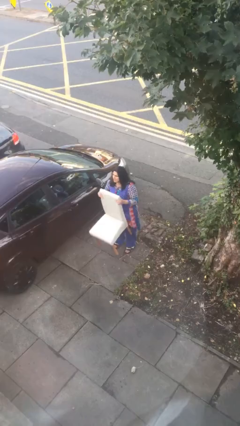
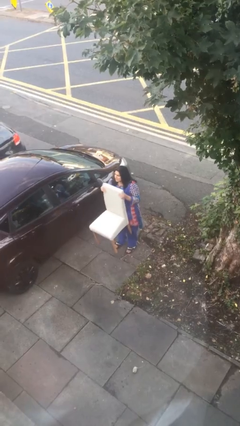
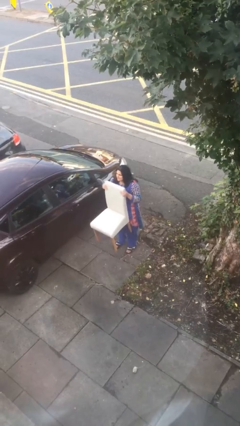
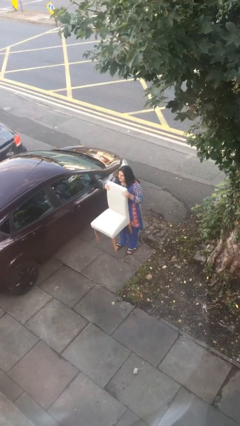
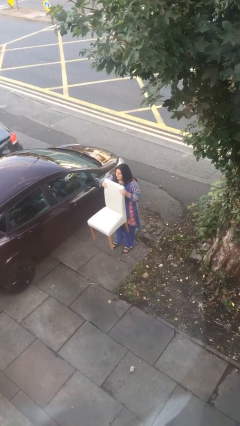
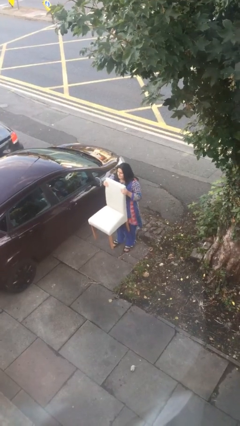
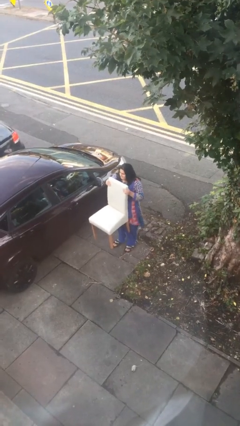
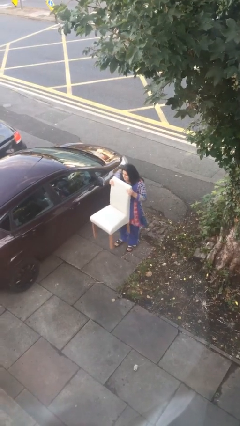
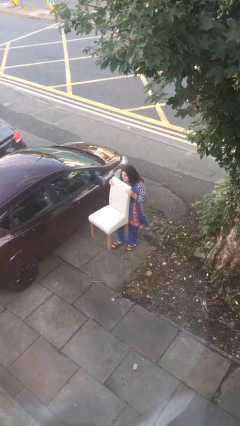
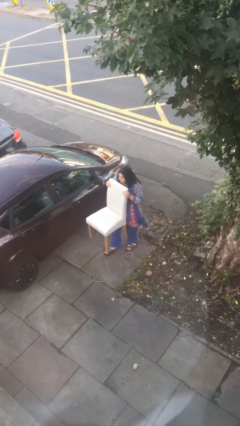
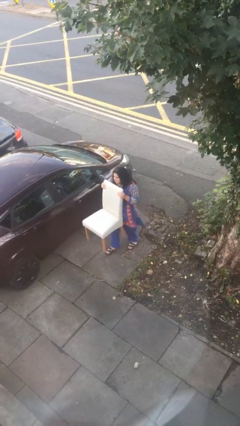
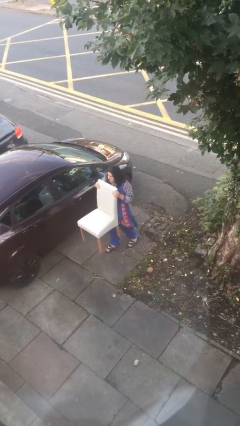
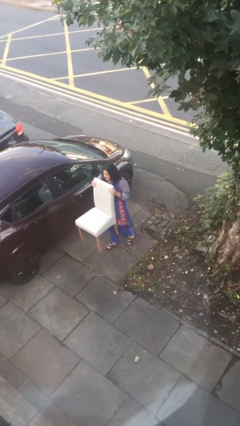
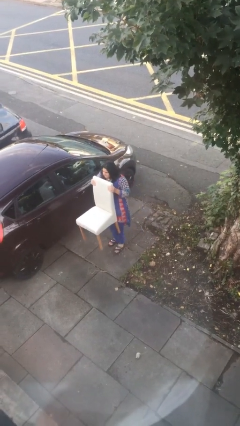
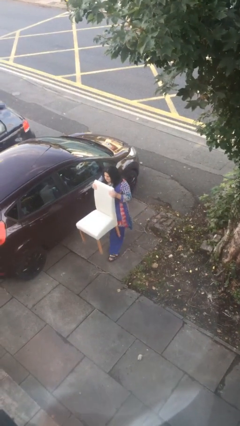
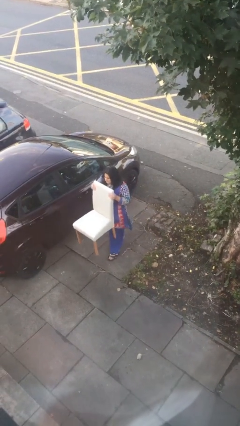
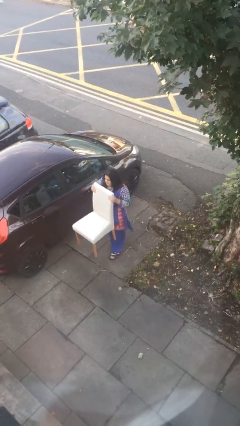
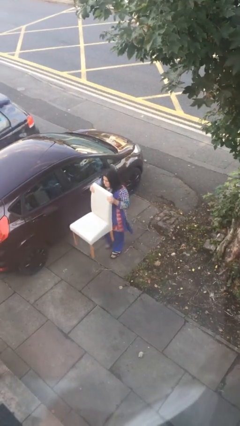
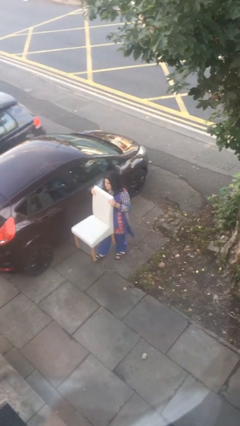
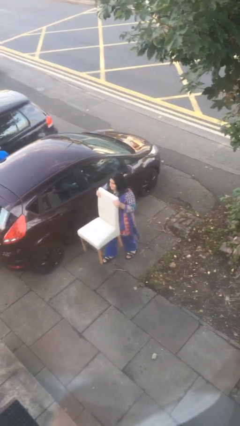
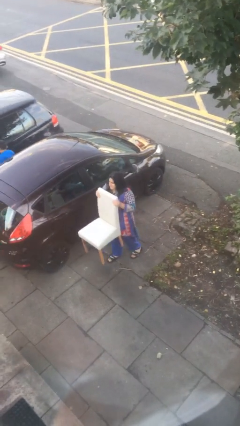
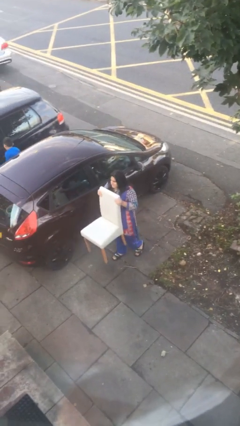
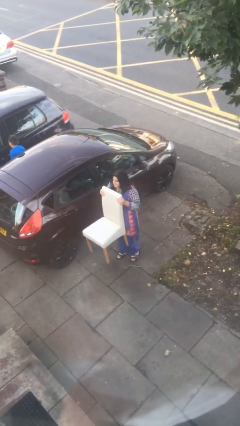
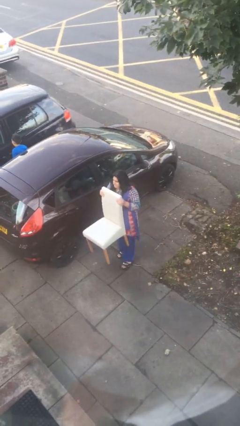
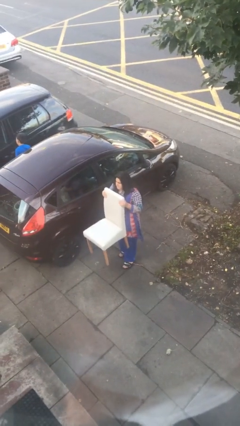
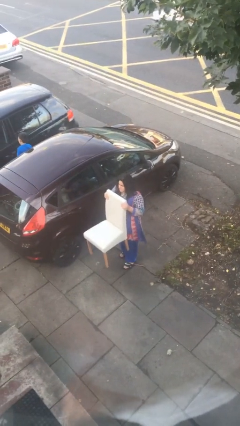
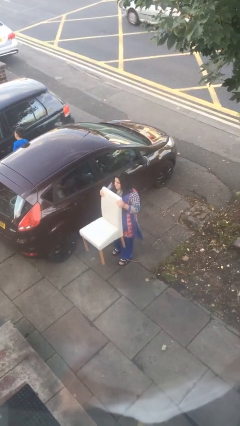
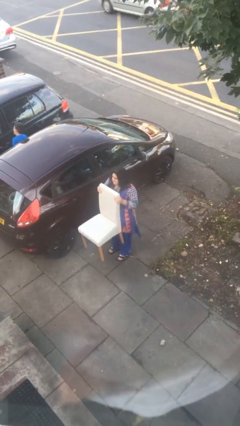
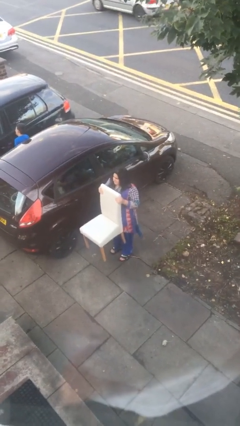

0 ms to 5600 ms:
person carries heavy object

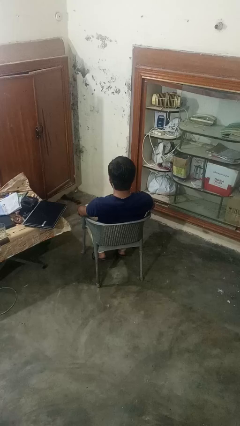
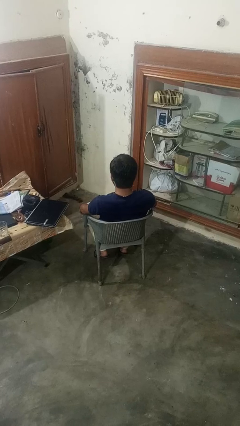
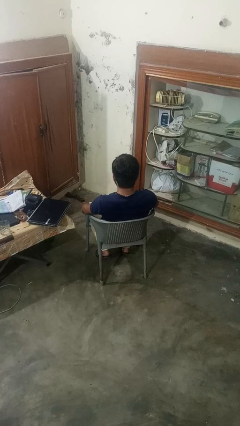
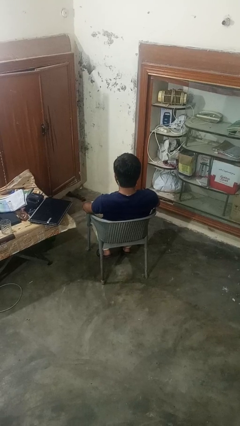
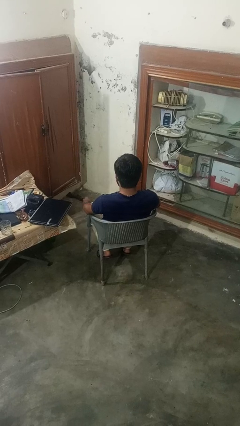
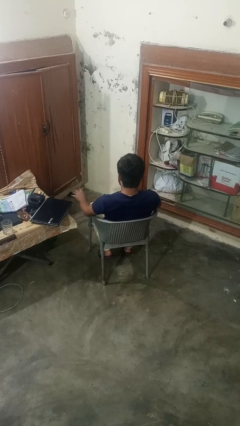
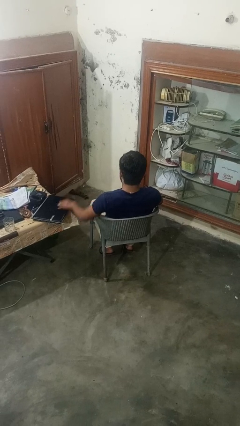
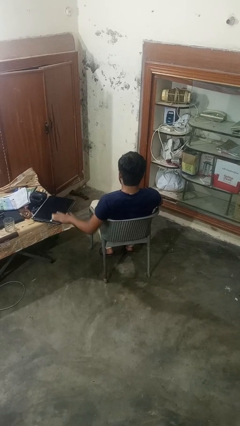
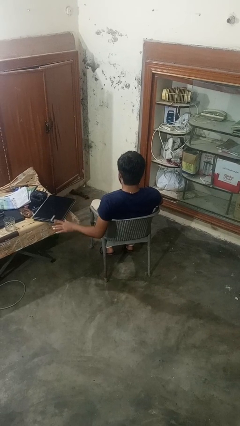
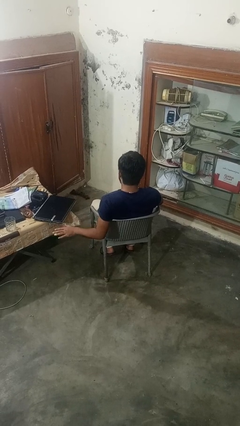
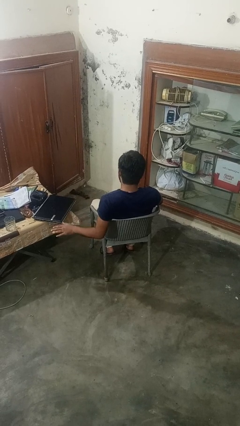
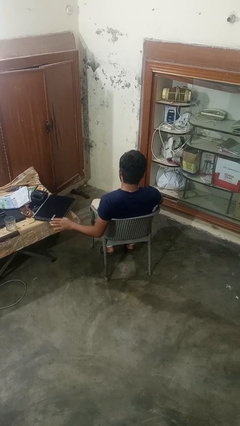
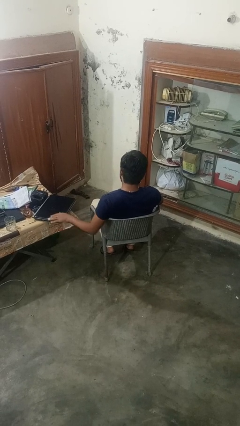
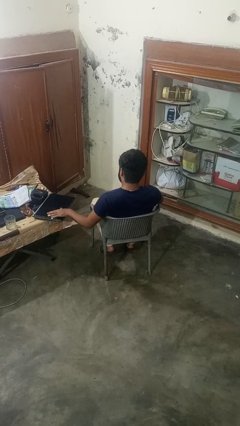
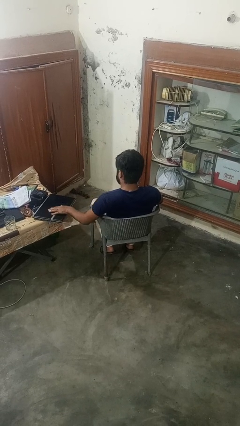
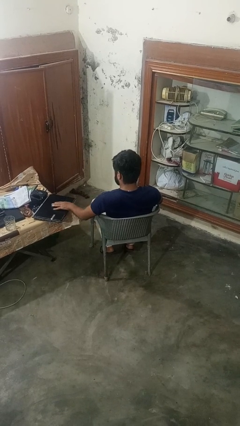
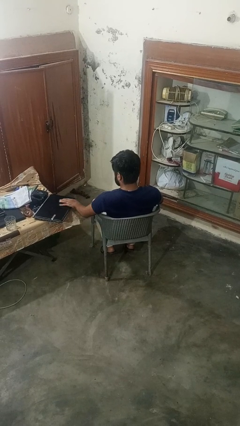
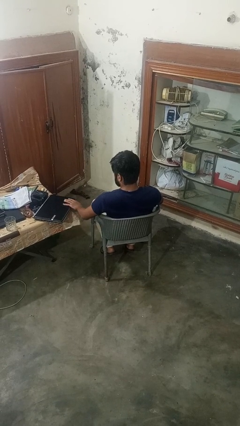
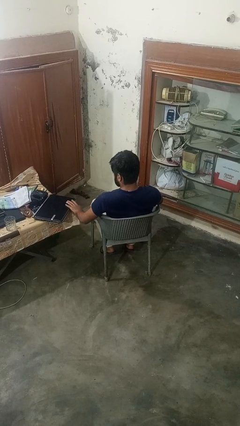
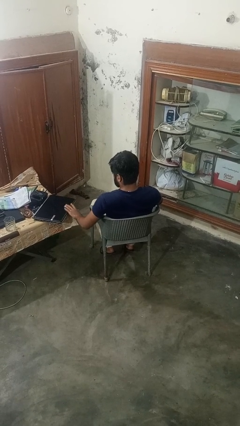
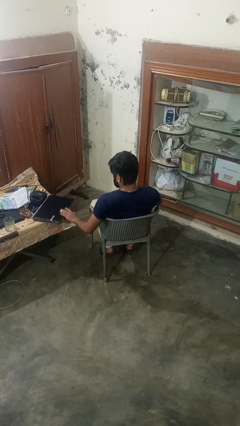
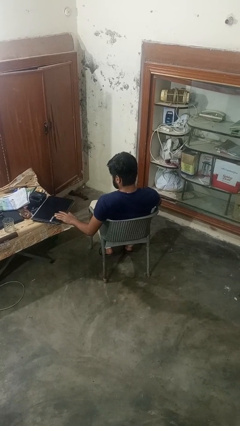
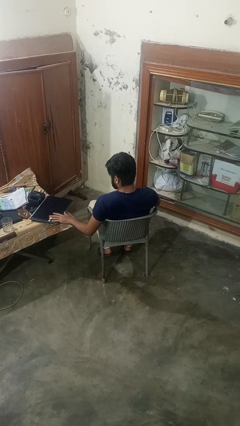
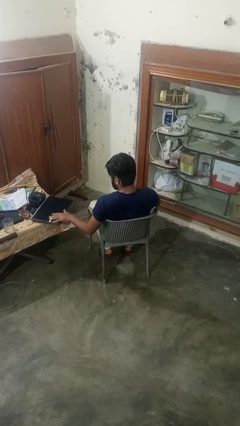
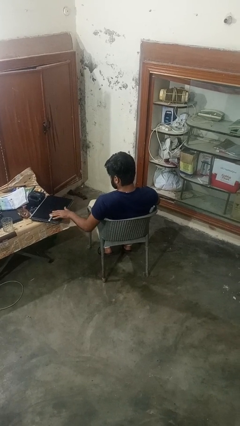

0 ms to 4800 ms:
person waves hand over object

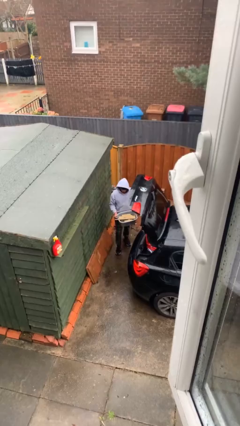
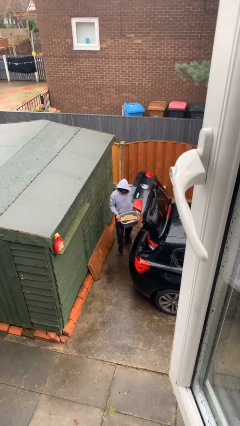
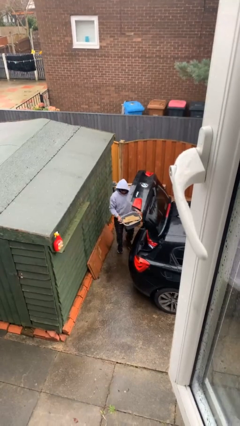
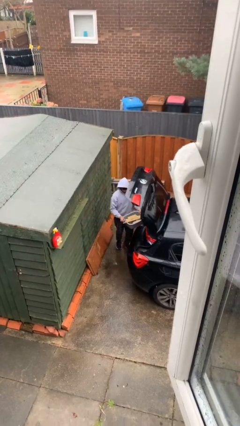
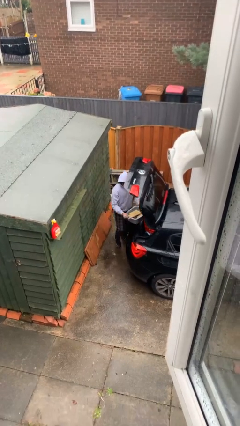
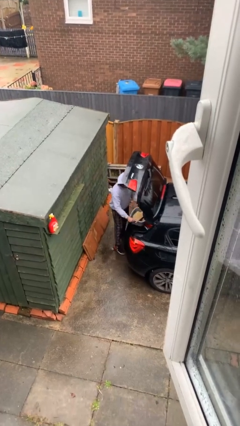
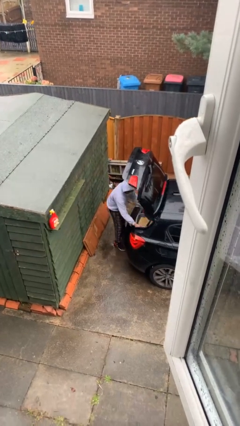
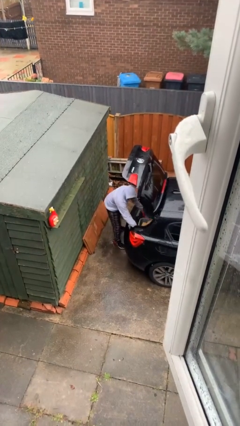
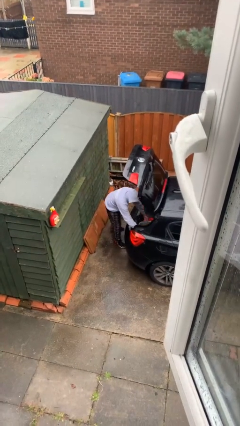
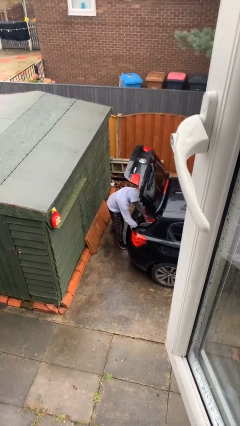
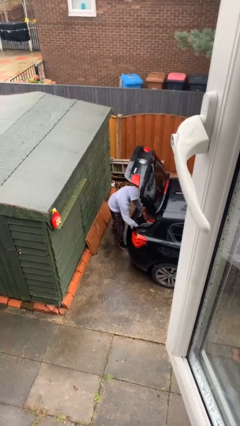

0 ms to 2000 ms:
person loads car

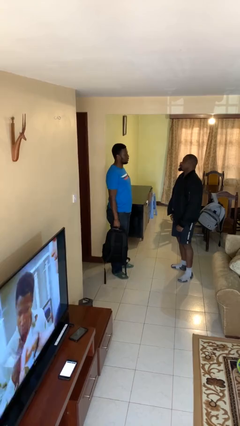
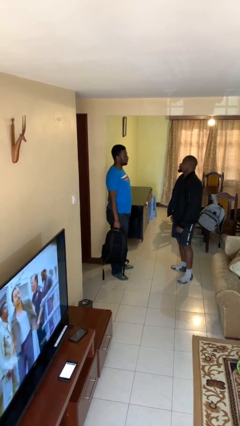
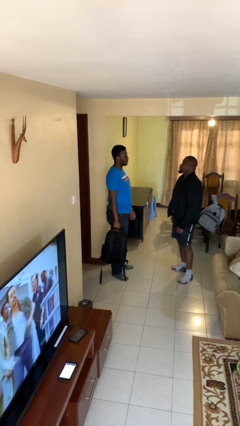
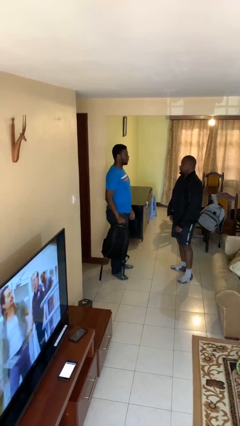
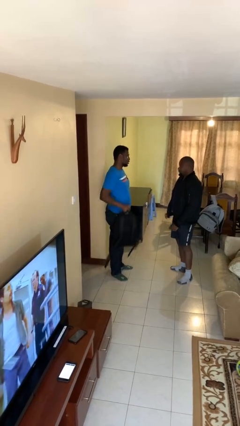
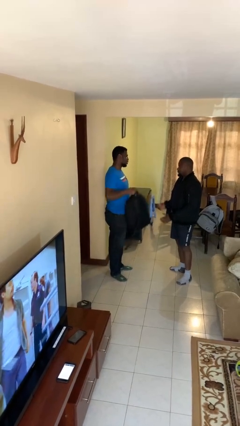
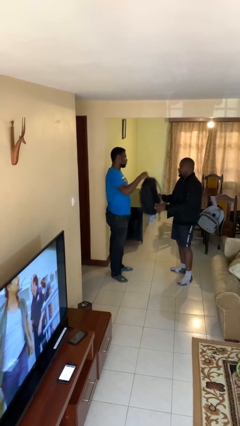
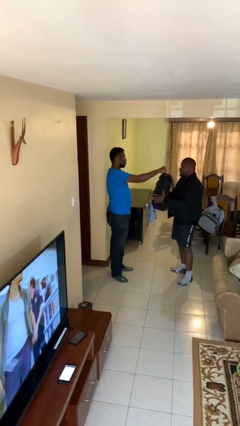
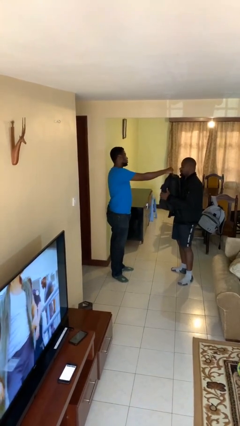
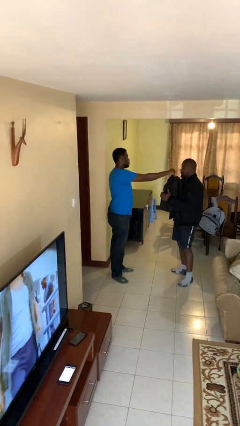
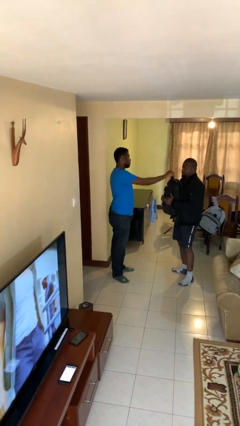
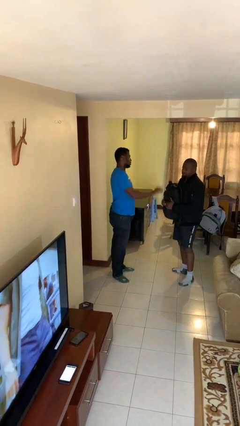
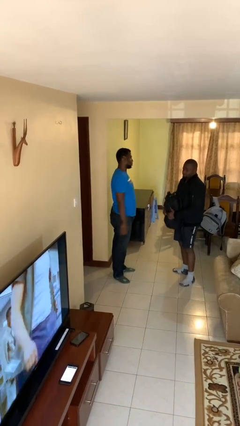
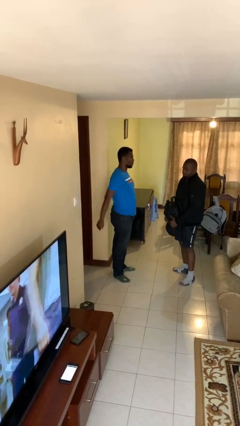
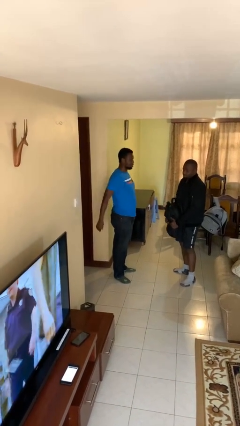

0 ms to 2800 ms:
person transfers object to person

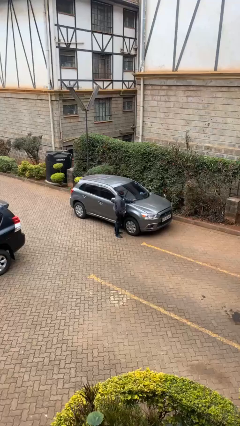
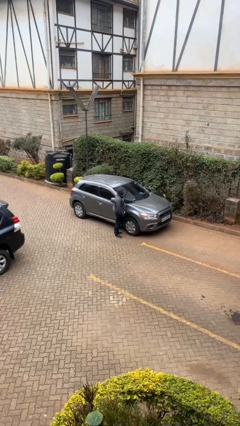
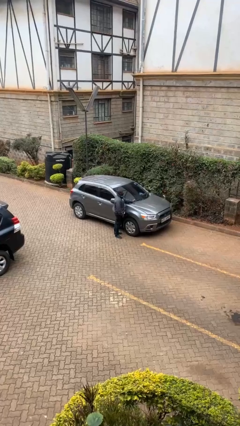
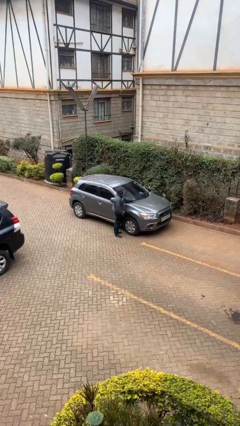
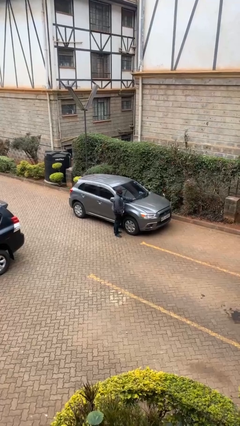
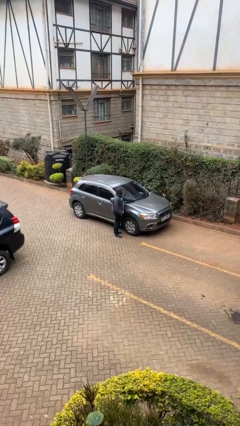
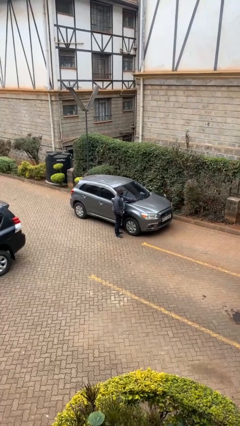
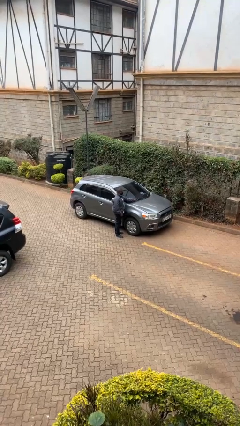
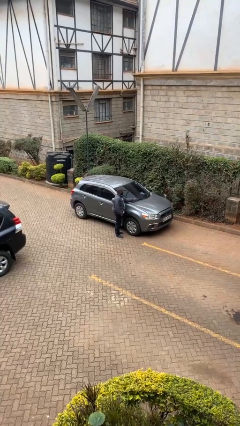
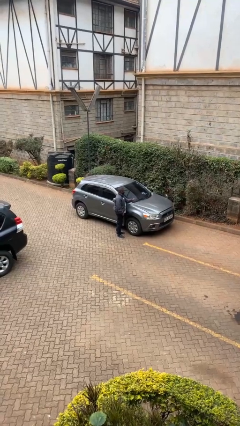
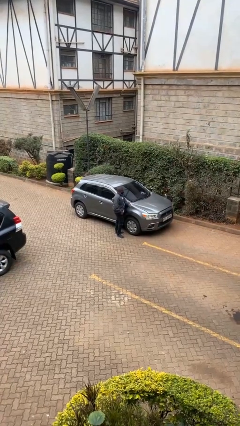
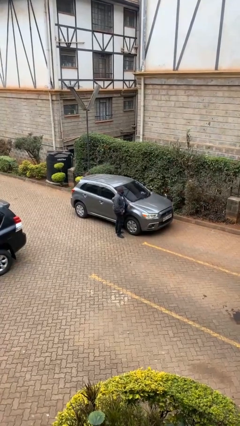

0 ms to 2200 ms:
person flips down car wipers
